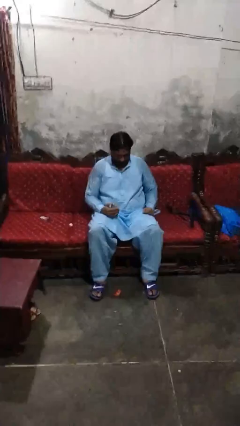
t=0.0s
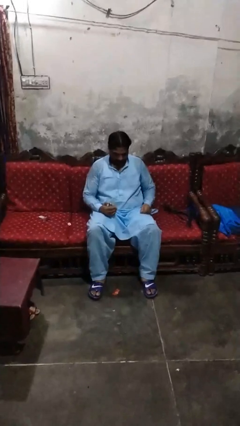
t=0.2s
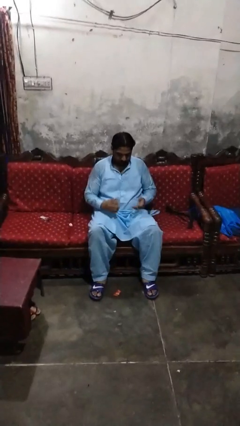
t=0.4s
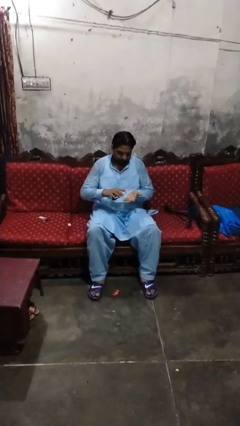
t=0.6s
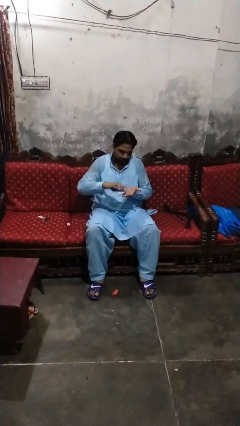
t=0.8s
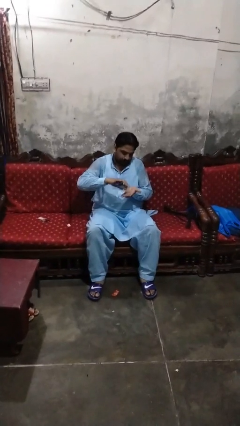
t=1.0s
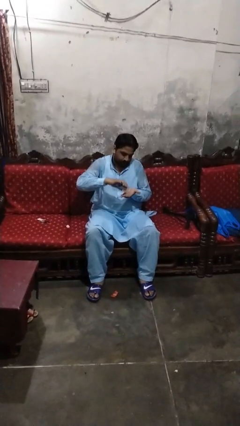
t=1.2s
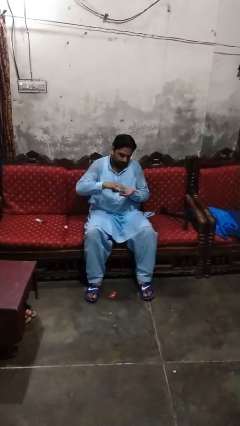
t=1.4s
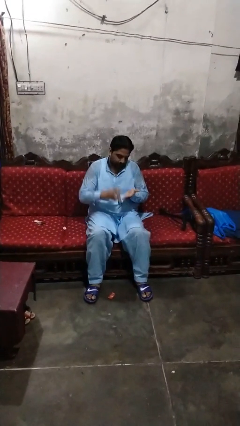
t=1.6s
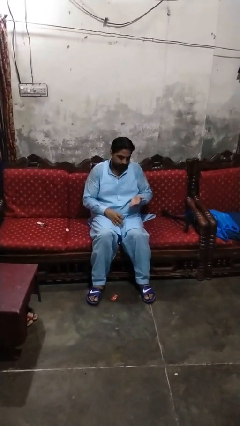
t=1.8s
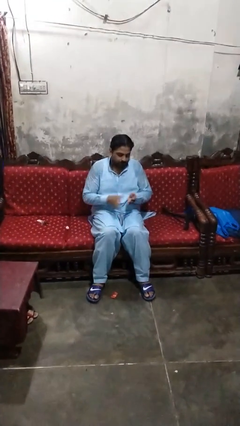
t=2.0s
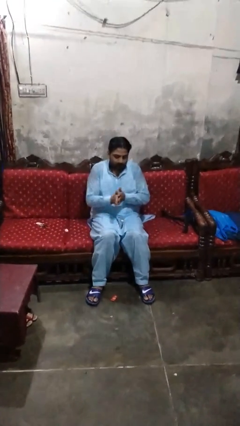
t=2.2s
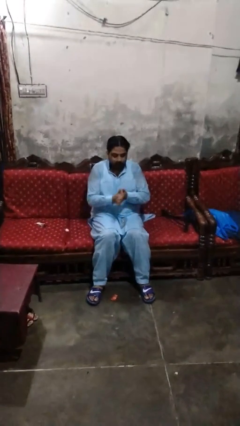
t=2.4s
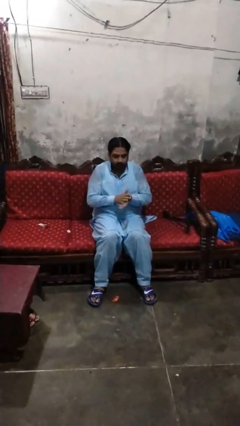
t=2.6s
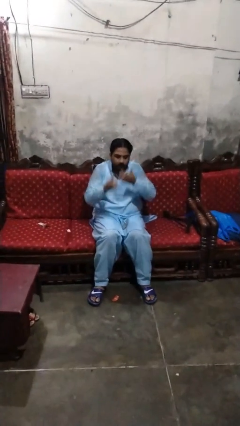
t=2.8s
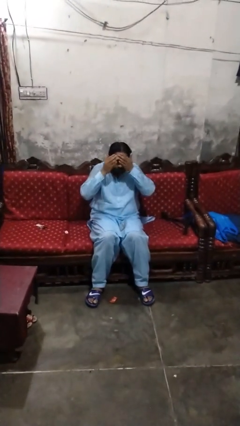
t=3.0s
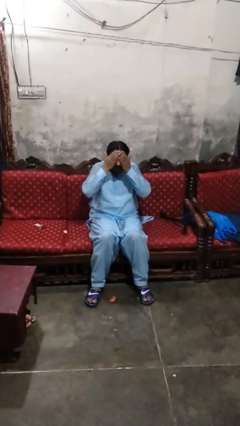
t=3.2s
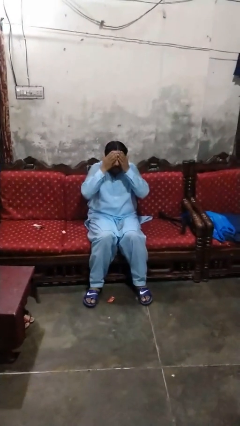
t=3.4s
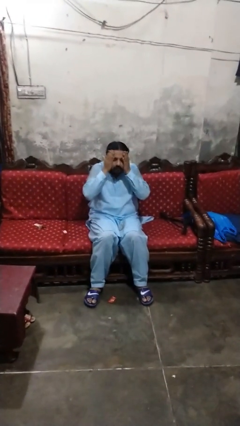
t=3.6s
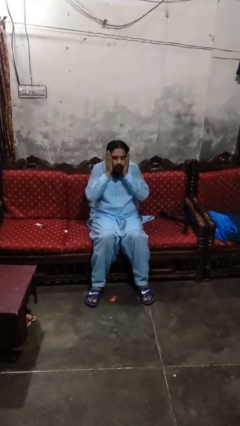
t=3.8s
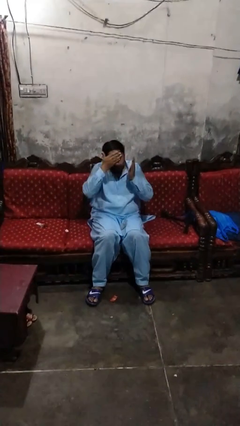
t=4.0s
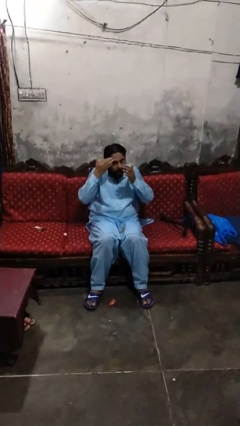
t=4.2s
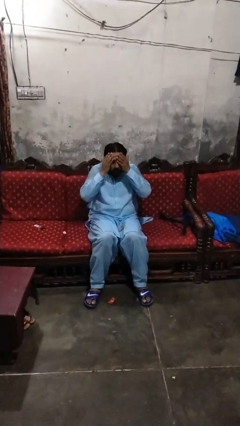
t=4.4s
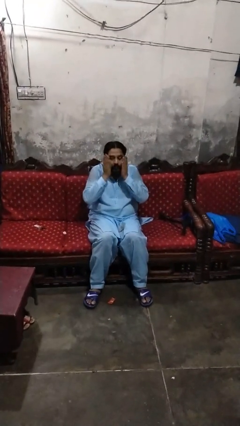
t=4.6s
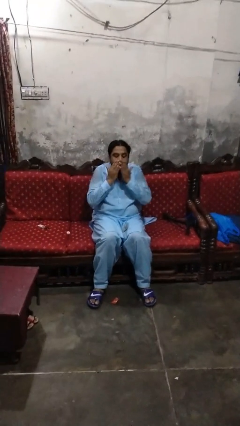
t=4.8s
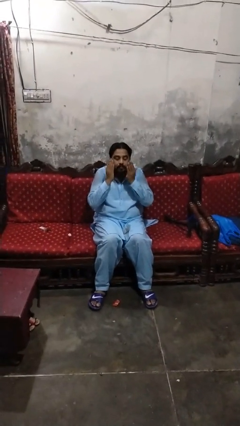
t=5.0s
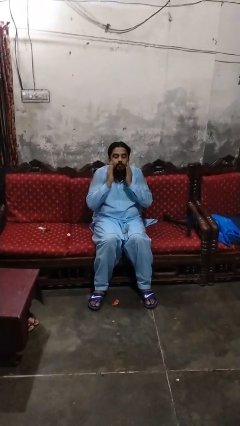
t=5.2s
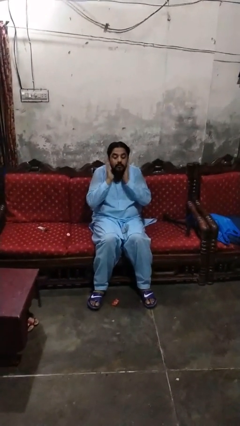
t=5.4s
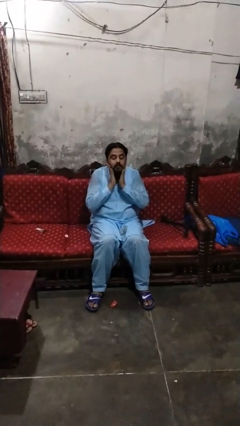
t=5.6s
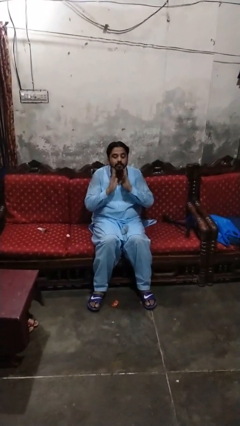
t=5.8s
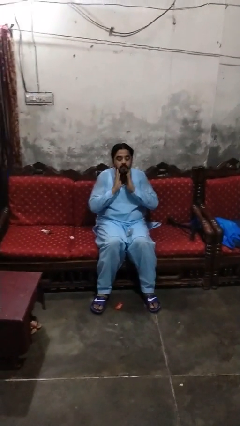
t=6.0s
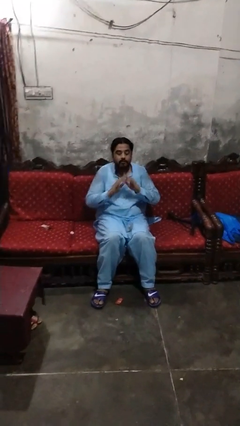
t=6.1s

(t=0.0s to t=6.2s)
person applies facial moisturizer

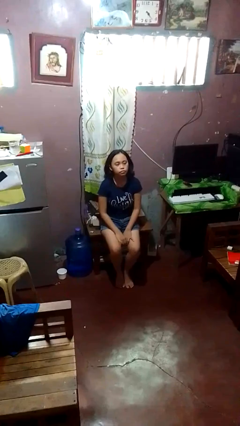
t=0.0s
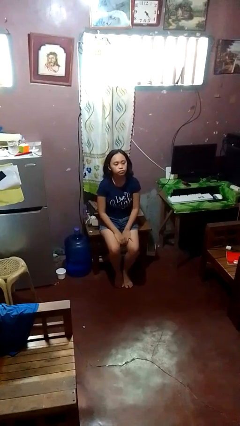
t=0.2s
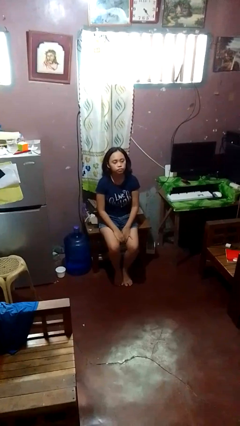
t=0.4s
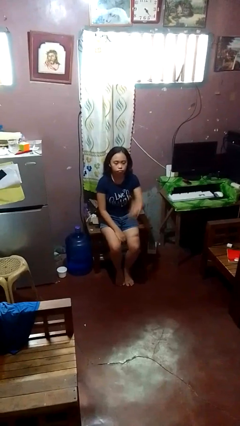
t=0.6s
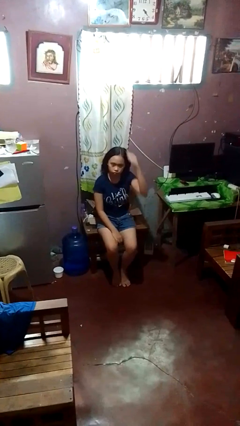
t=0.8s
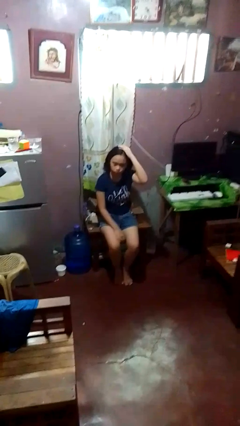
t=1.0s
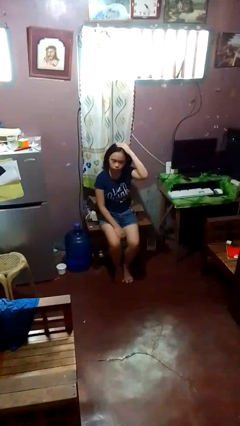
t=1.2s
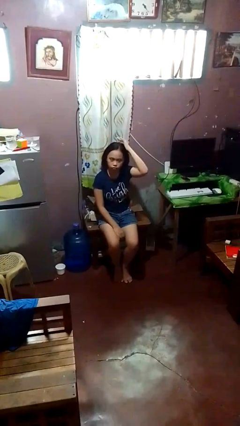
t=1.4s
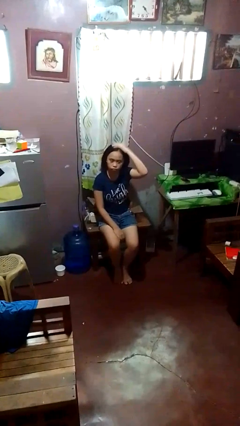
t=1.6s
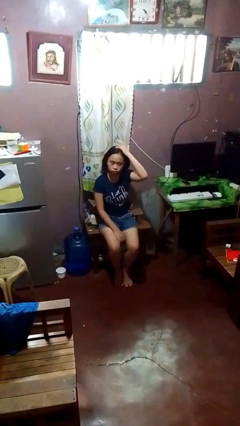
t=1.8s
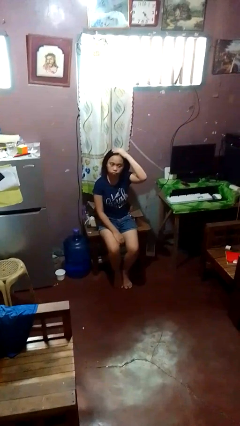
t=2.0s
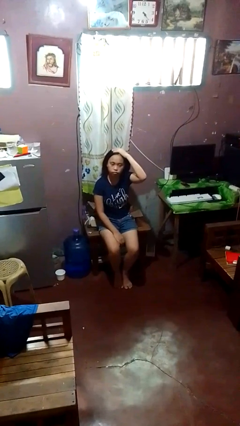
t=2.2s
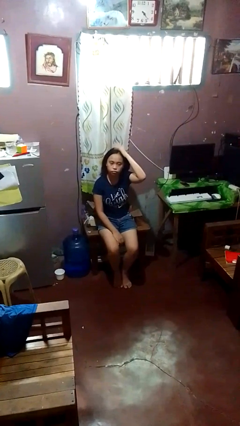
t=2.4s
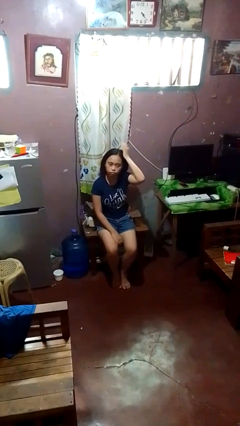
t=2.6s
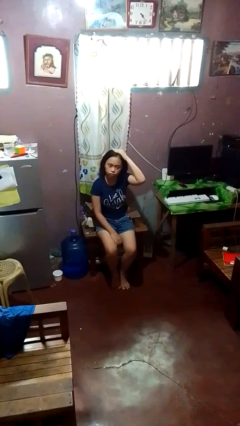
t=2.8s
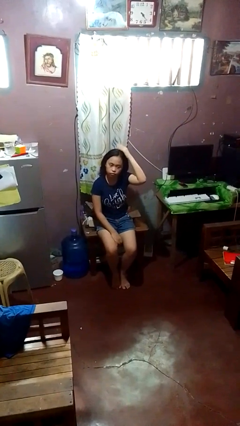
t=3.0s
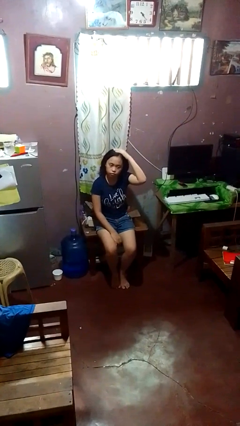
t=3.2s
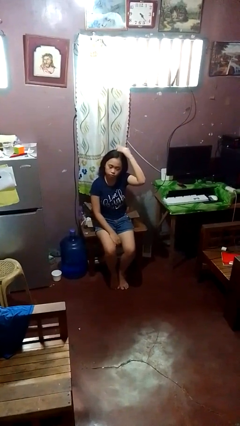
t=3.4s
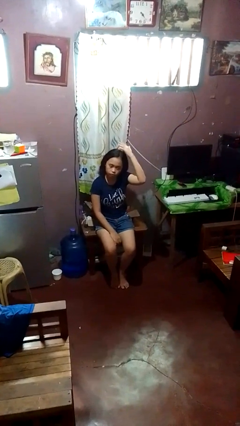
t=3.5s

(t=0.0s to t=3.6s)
person pats head

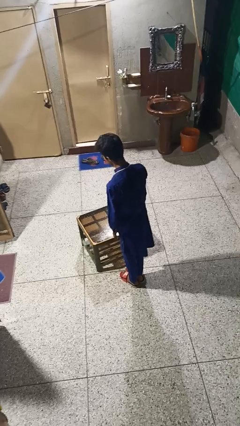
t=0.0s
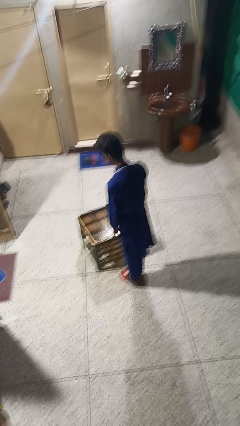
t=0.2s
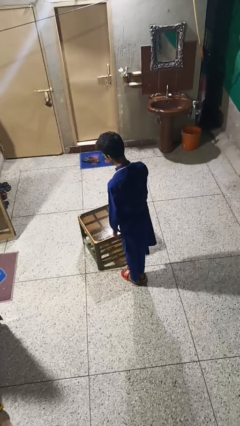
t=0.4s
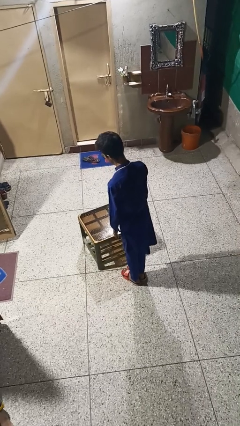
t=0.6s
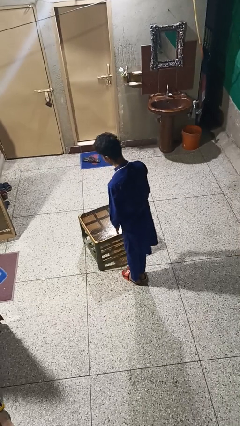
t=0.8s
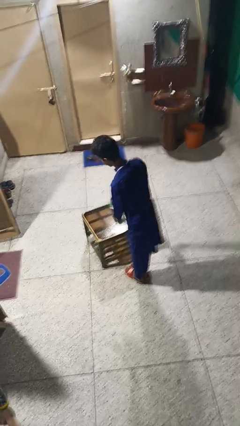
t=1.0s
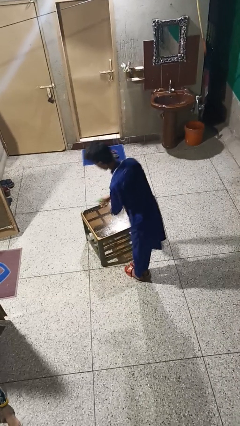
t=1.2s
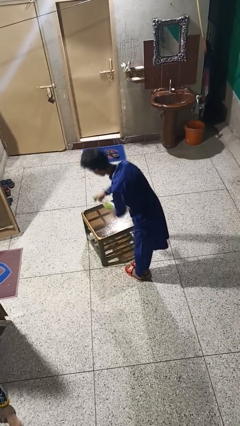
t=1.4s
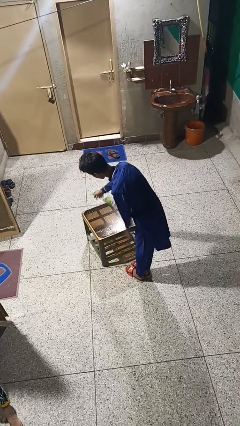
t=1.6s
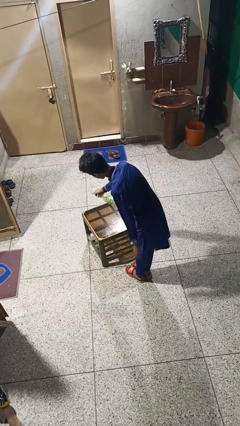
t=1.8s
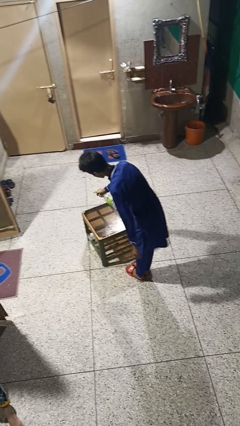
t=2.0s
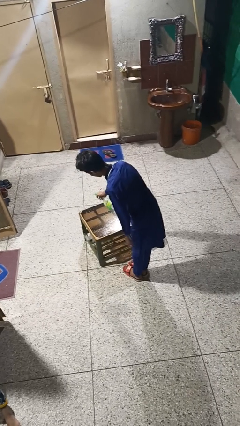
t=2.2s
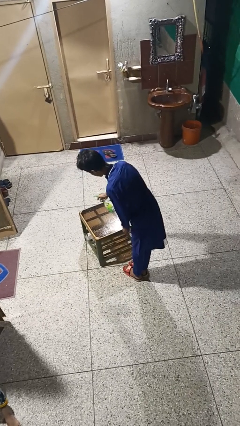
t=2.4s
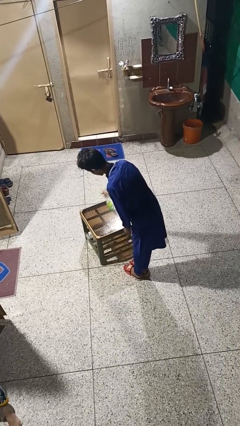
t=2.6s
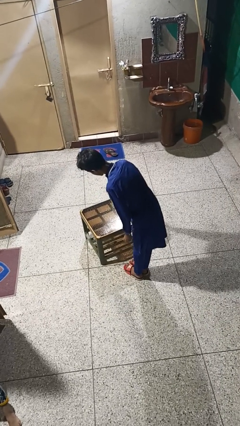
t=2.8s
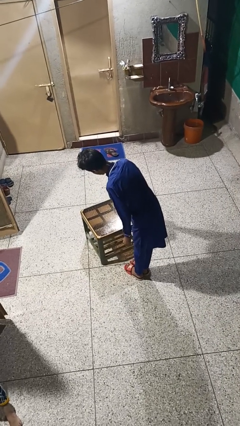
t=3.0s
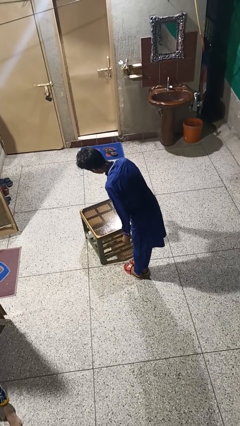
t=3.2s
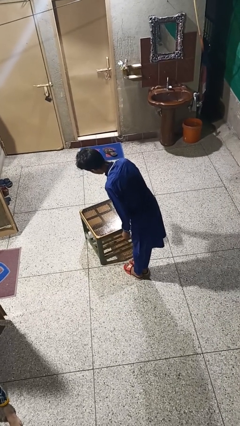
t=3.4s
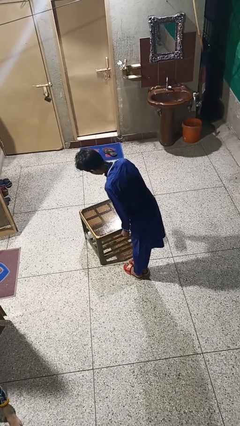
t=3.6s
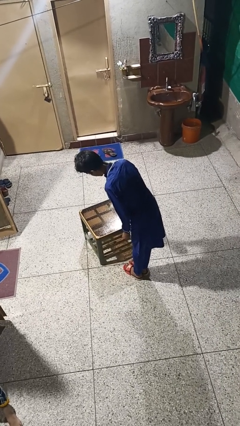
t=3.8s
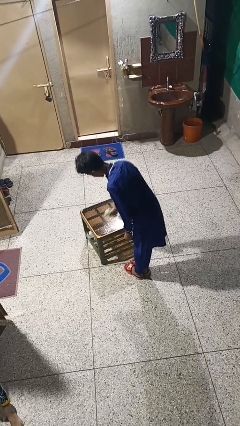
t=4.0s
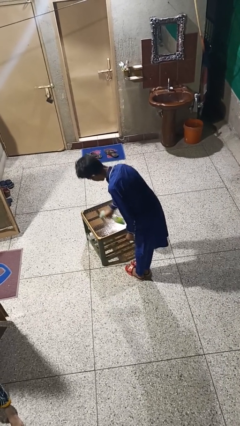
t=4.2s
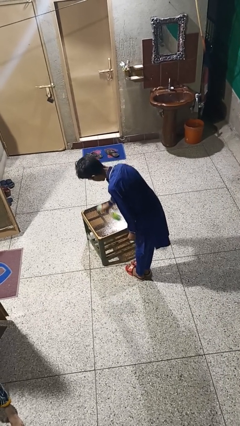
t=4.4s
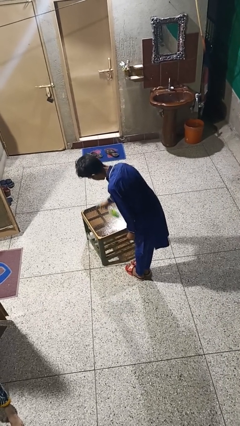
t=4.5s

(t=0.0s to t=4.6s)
person sprays from bottle

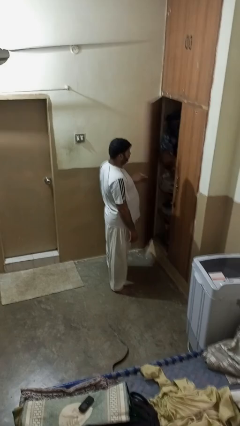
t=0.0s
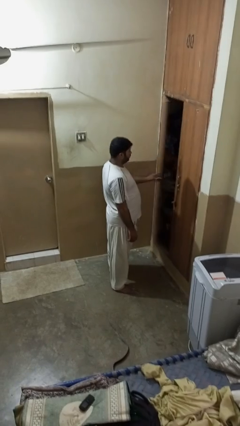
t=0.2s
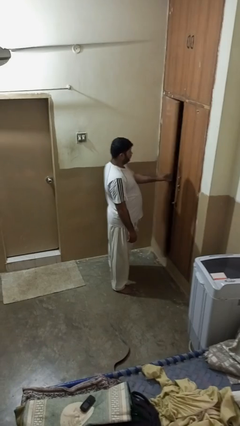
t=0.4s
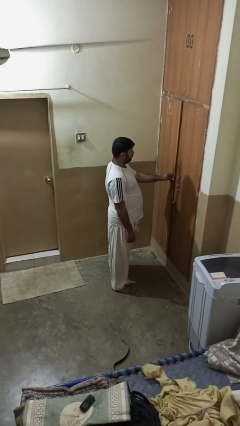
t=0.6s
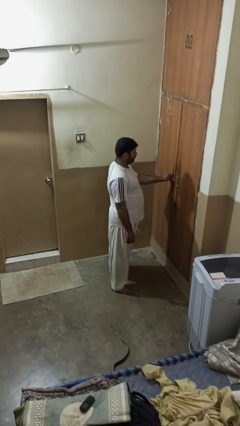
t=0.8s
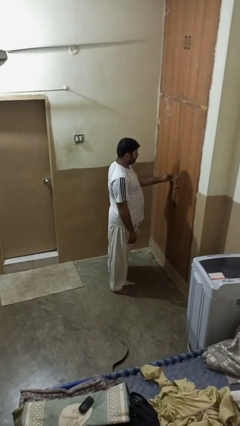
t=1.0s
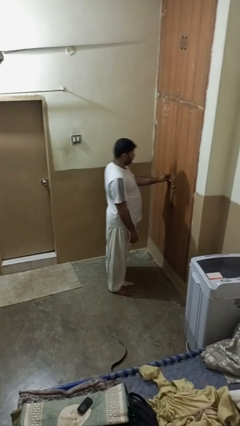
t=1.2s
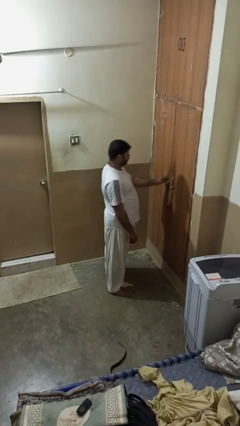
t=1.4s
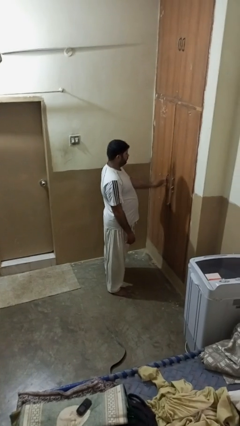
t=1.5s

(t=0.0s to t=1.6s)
person closes closet door

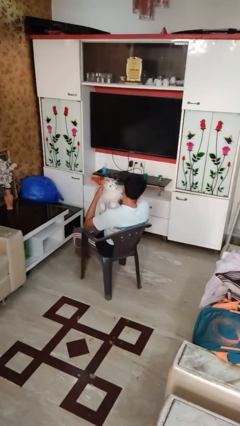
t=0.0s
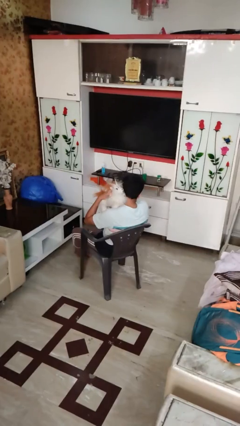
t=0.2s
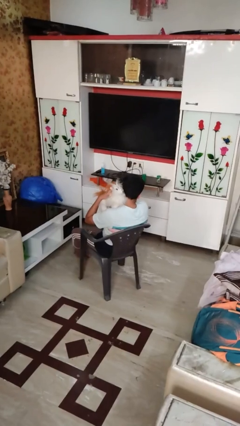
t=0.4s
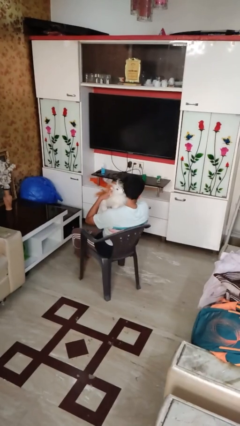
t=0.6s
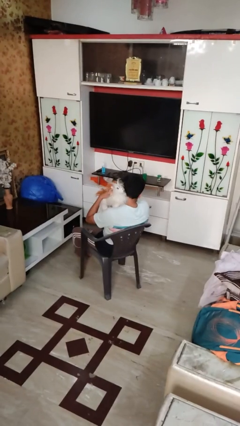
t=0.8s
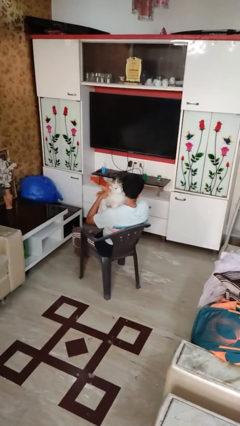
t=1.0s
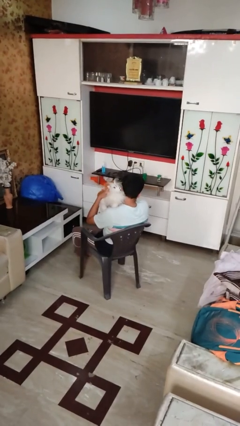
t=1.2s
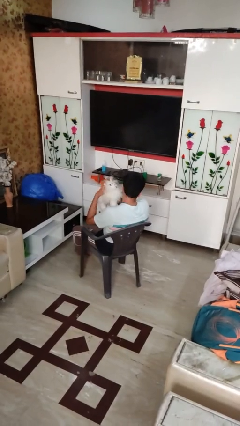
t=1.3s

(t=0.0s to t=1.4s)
person hugs stuffed animal

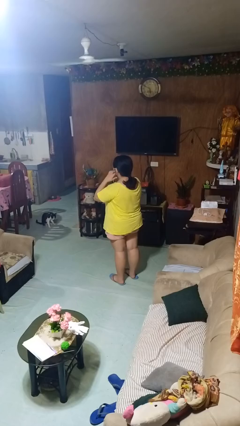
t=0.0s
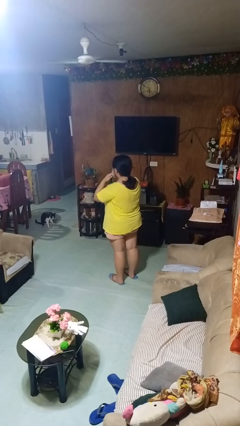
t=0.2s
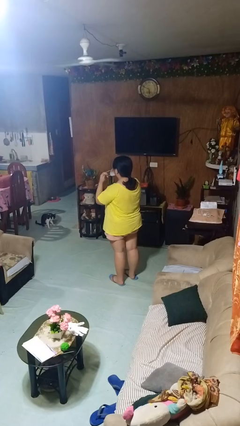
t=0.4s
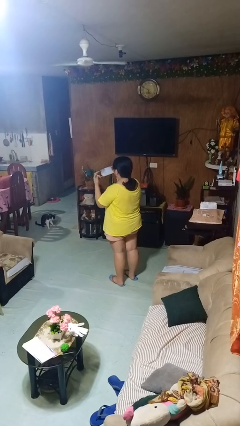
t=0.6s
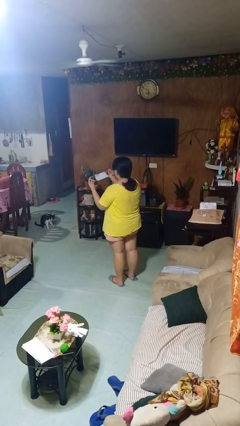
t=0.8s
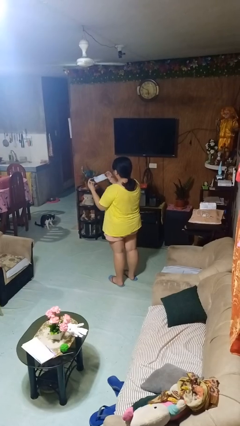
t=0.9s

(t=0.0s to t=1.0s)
person takes off facemask
